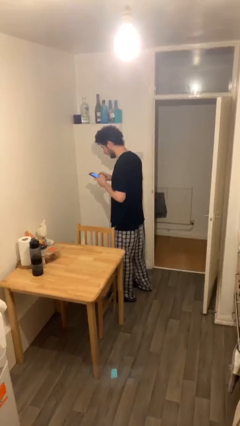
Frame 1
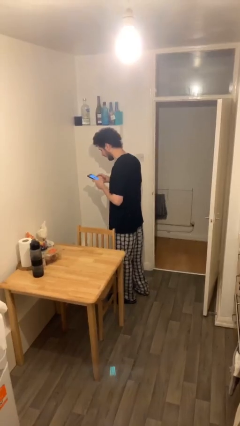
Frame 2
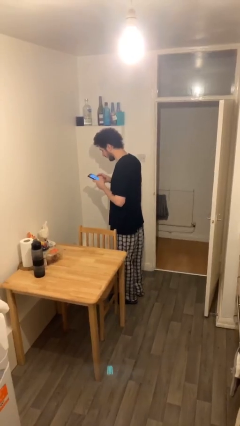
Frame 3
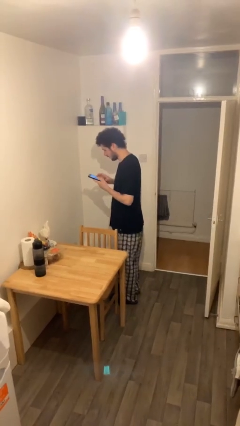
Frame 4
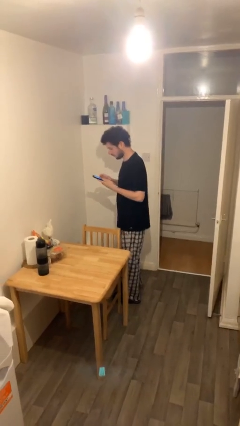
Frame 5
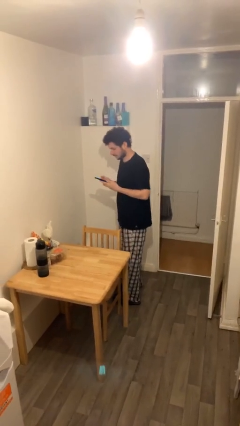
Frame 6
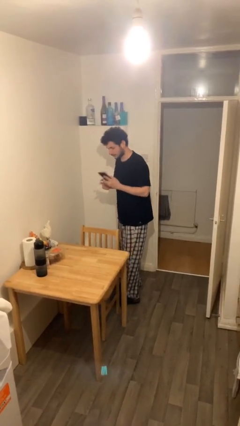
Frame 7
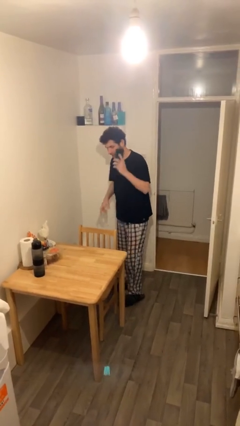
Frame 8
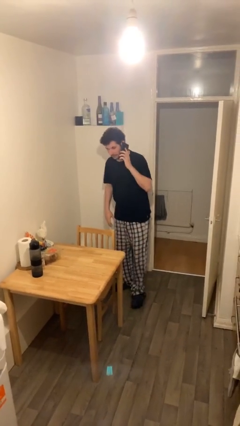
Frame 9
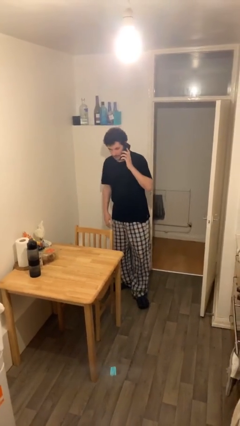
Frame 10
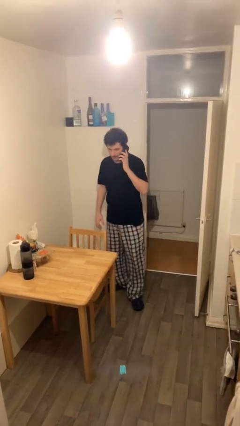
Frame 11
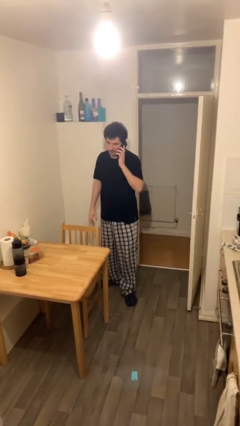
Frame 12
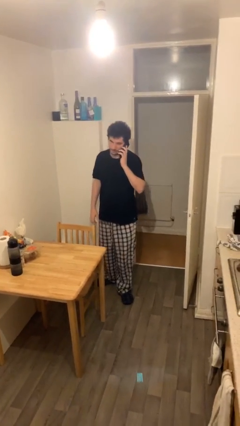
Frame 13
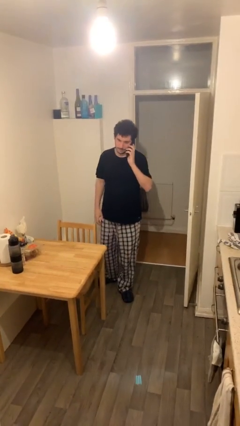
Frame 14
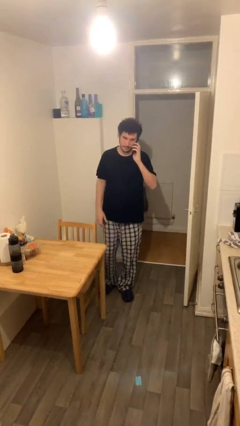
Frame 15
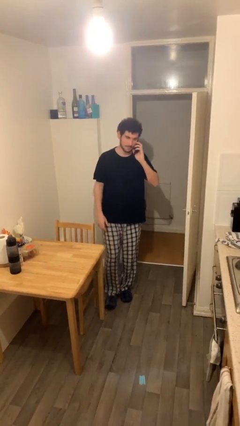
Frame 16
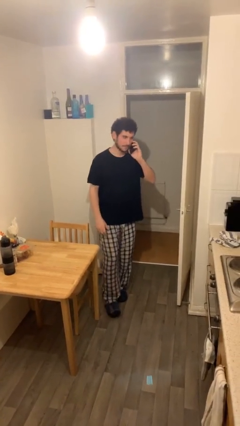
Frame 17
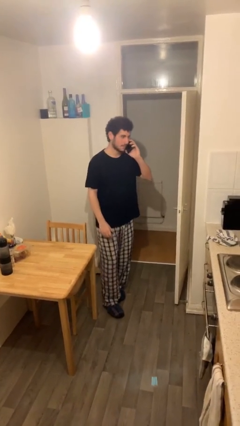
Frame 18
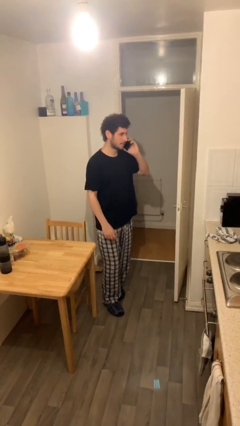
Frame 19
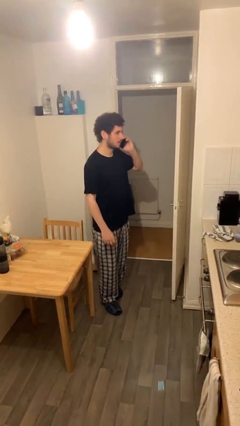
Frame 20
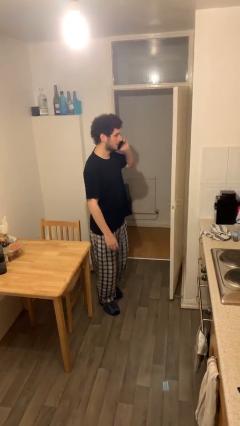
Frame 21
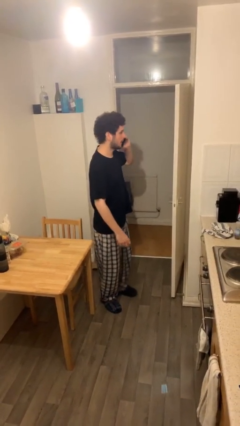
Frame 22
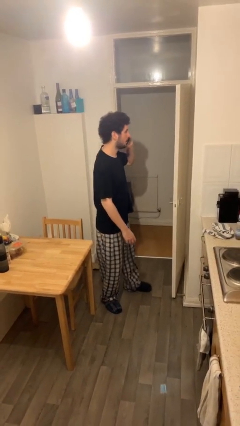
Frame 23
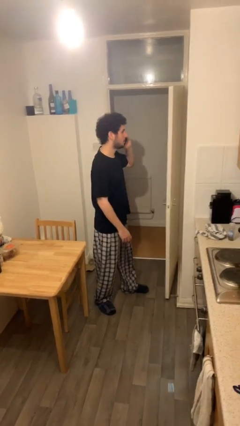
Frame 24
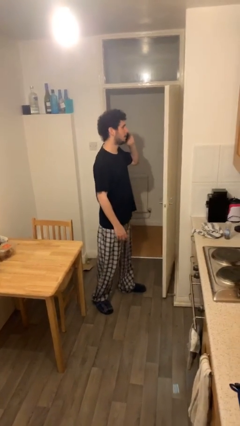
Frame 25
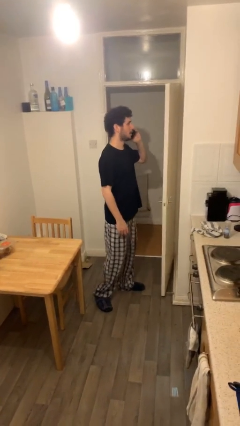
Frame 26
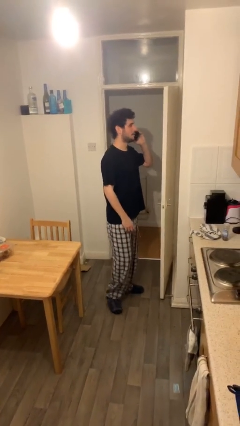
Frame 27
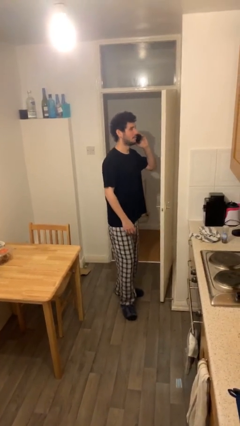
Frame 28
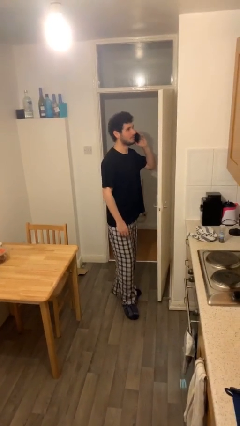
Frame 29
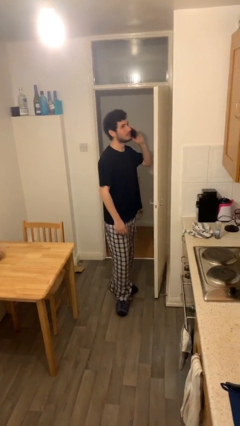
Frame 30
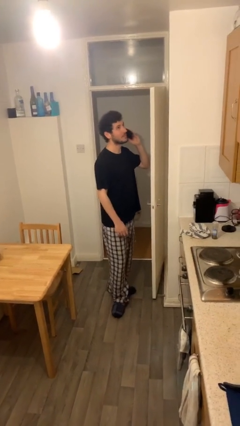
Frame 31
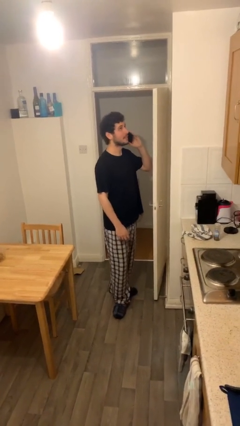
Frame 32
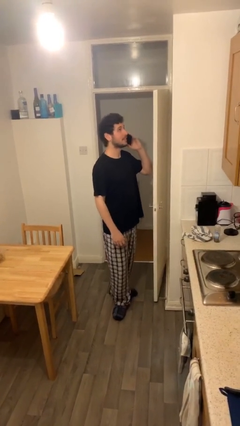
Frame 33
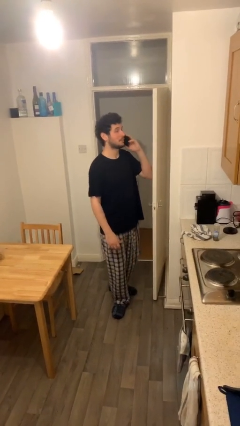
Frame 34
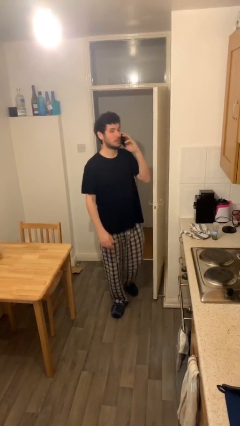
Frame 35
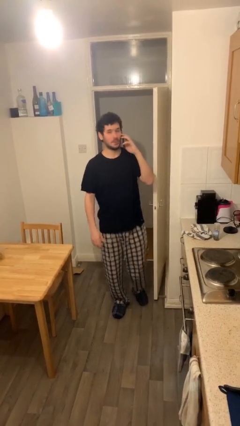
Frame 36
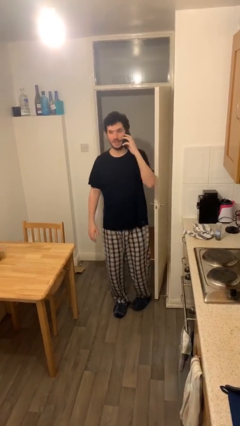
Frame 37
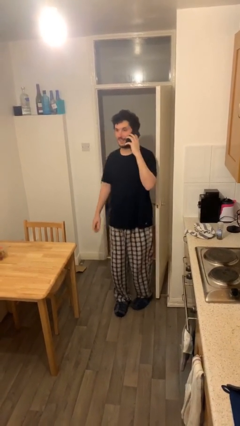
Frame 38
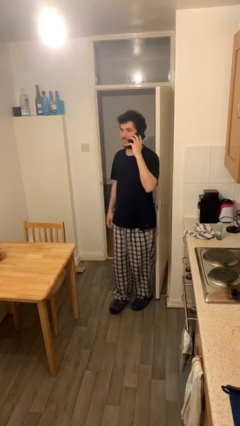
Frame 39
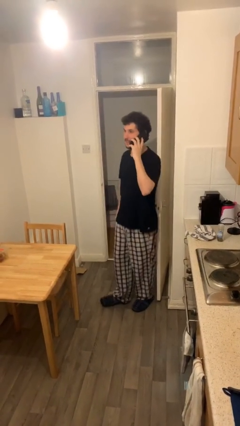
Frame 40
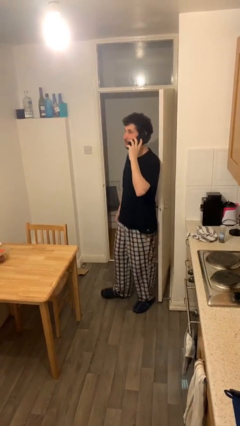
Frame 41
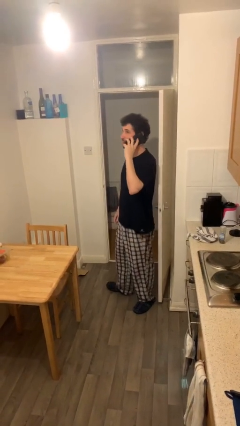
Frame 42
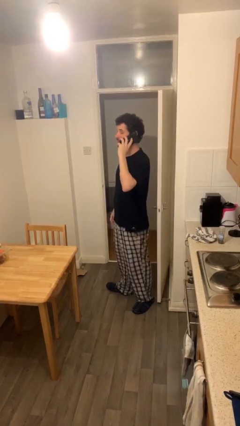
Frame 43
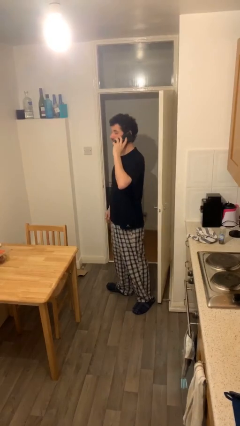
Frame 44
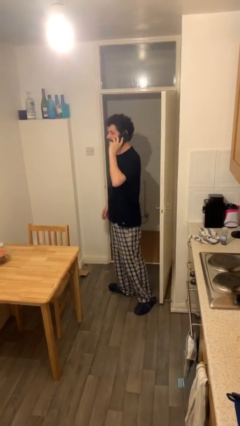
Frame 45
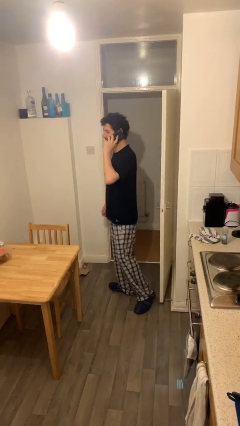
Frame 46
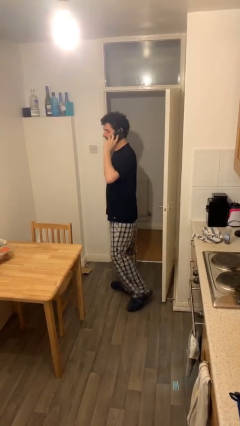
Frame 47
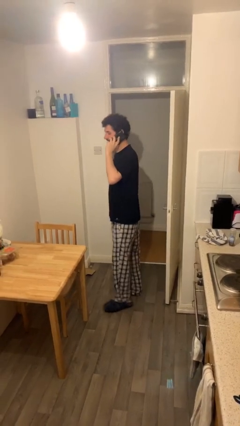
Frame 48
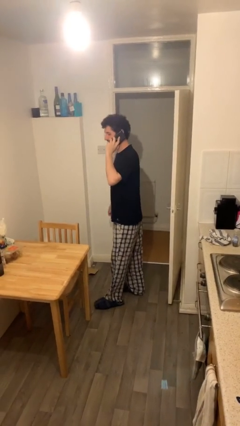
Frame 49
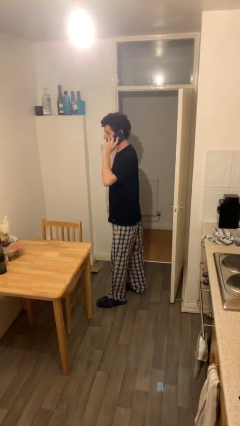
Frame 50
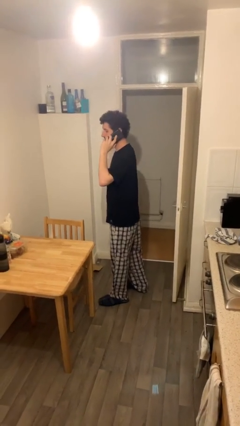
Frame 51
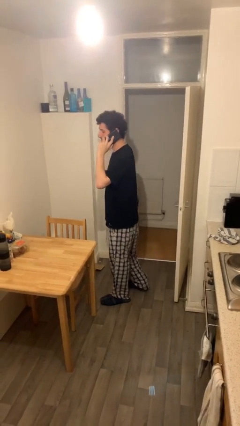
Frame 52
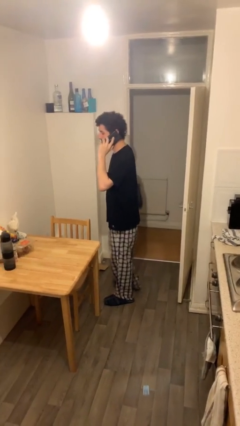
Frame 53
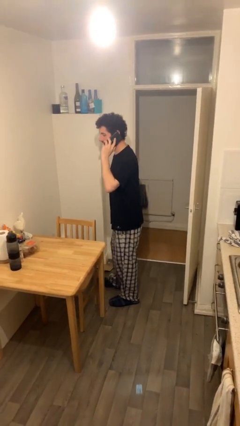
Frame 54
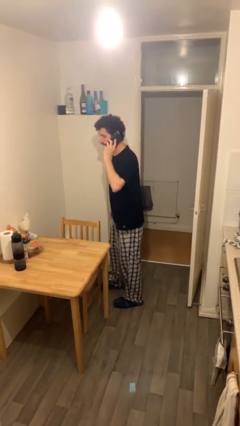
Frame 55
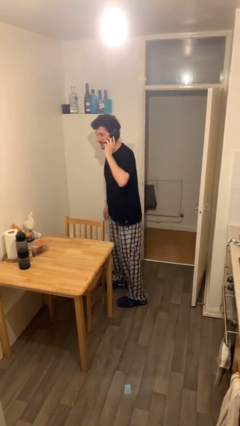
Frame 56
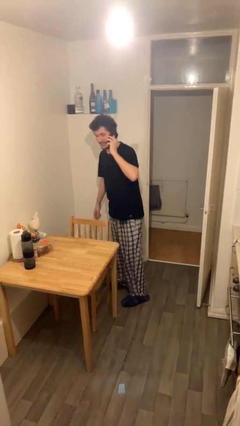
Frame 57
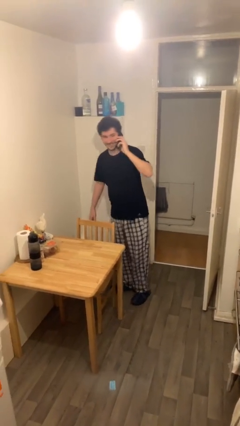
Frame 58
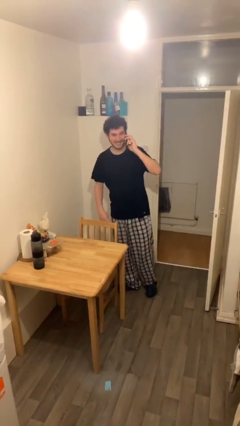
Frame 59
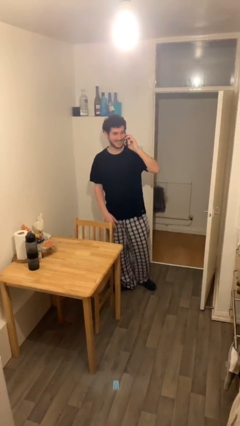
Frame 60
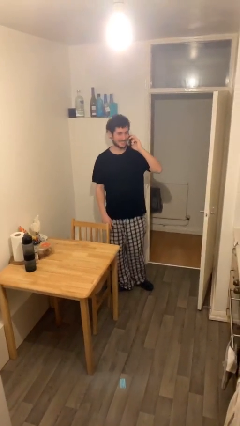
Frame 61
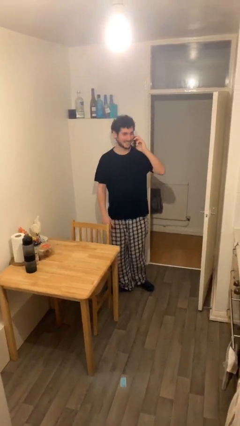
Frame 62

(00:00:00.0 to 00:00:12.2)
person talks on phone

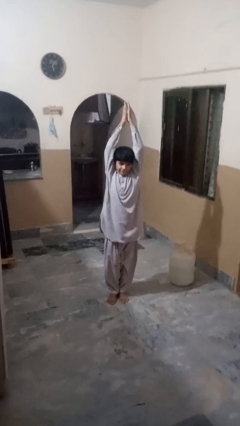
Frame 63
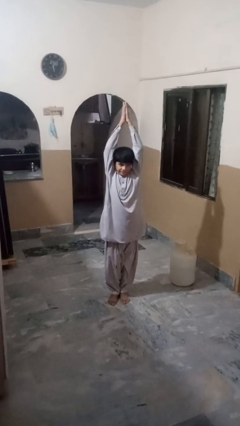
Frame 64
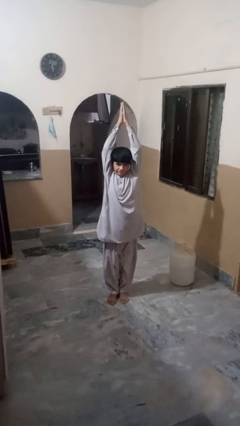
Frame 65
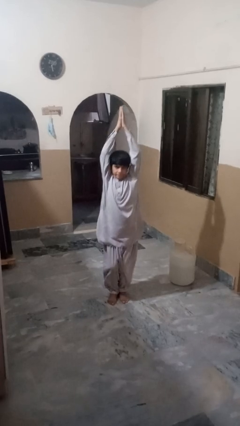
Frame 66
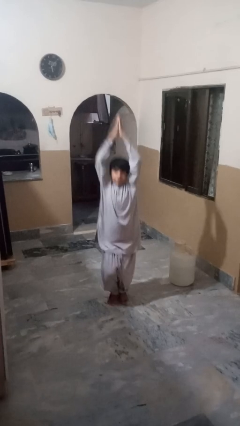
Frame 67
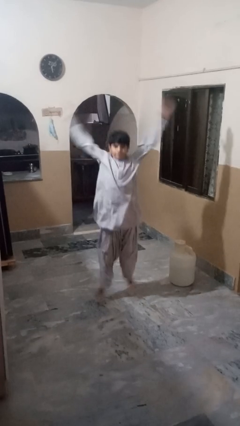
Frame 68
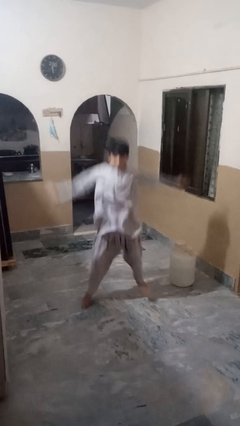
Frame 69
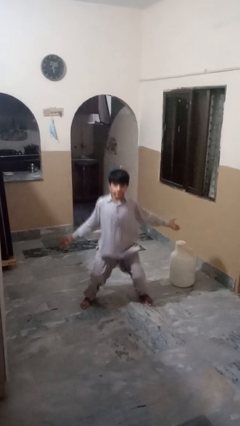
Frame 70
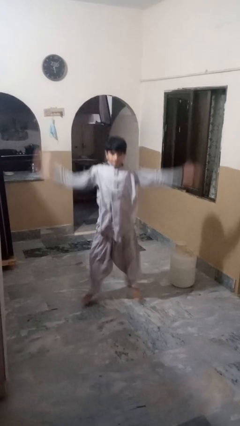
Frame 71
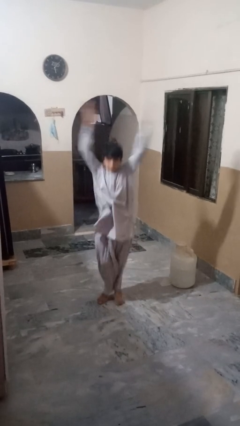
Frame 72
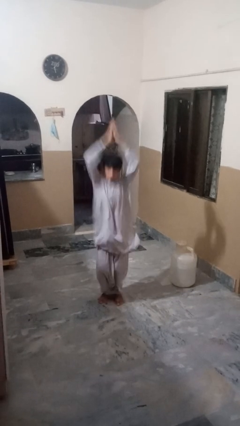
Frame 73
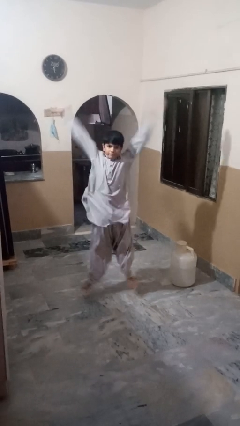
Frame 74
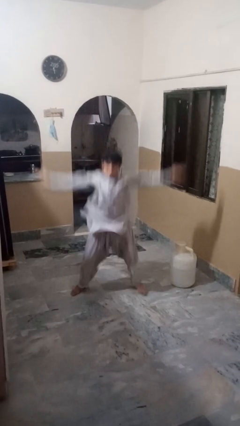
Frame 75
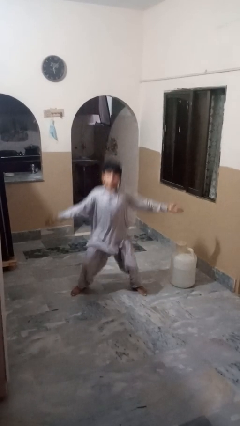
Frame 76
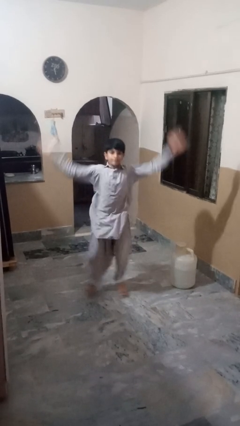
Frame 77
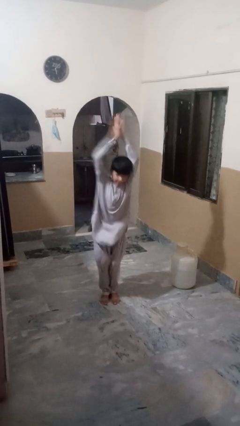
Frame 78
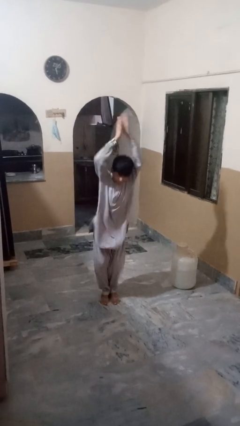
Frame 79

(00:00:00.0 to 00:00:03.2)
person exercises with jumping jacks

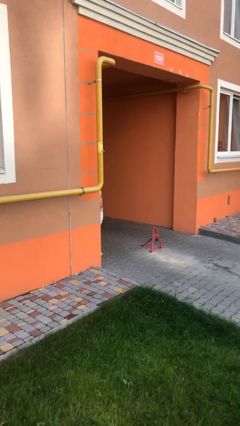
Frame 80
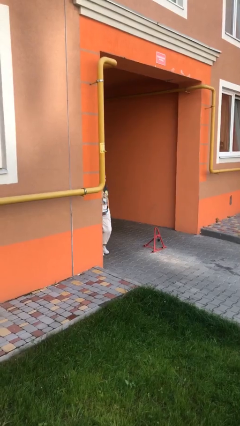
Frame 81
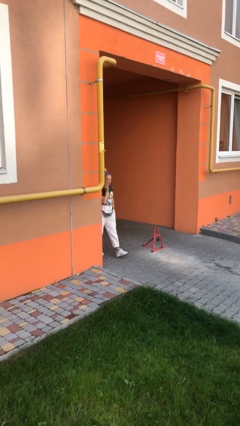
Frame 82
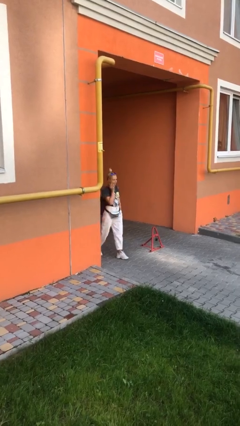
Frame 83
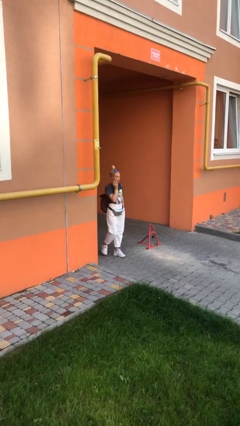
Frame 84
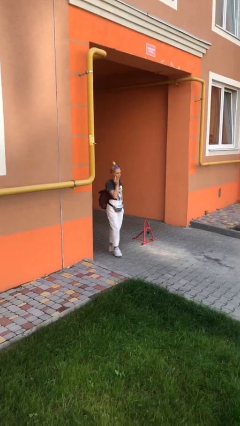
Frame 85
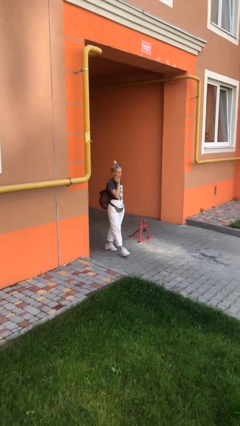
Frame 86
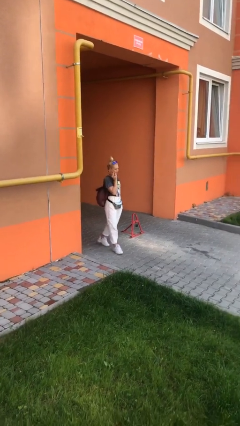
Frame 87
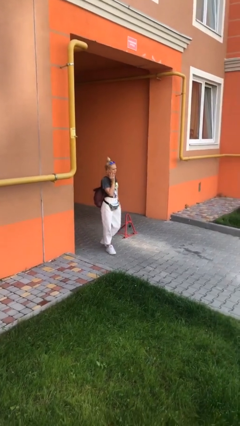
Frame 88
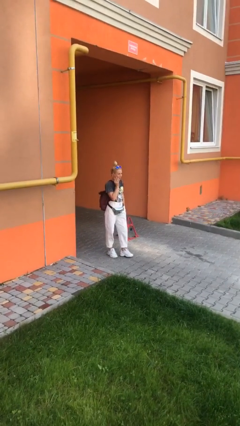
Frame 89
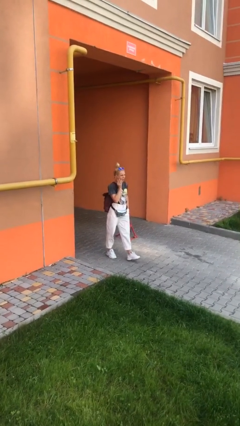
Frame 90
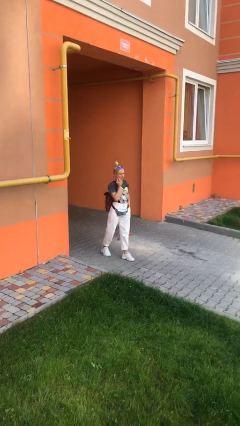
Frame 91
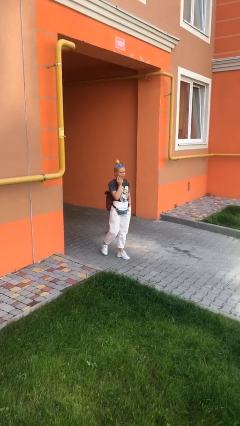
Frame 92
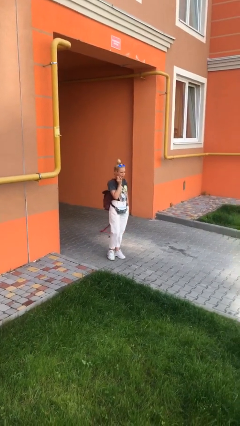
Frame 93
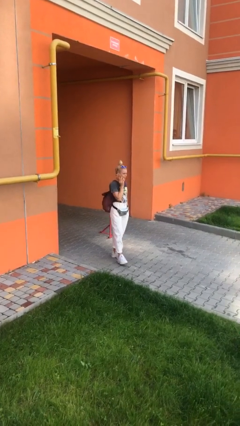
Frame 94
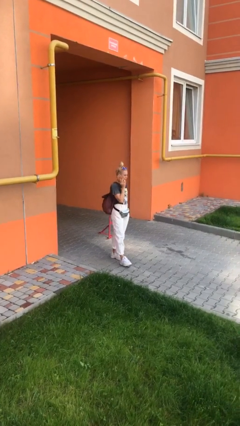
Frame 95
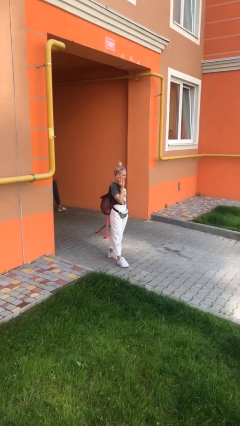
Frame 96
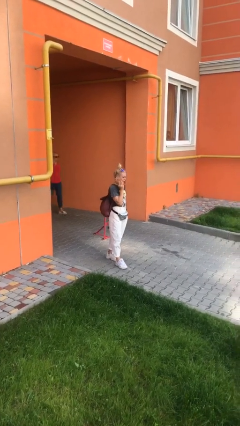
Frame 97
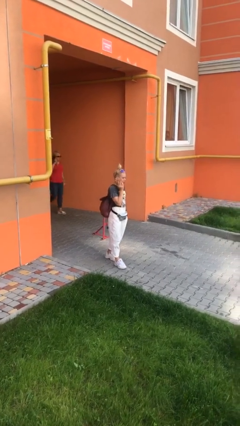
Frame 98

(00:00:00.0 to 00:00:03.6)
person enters scene through structure
